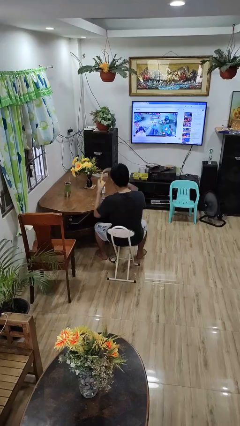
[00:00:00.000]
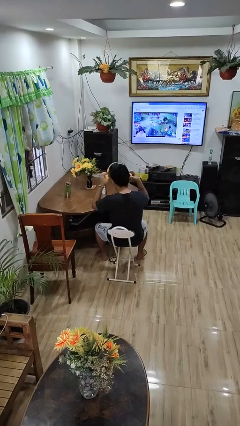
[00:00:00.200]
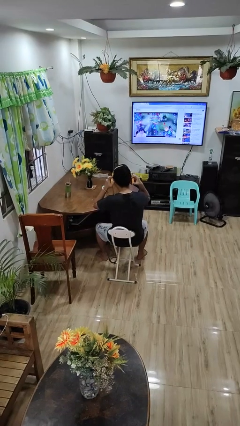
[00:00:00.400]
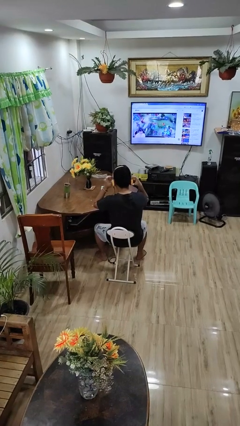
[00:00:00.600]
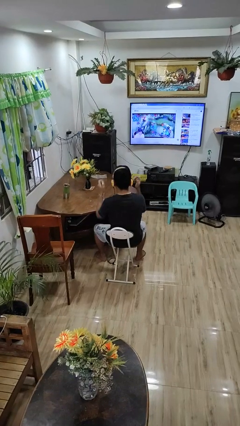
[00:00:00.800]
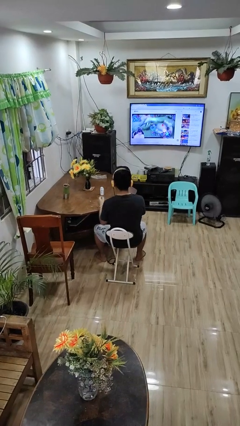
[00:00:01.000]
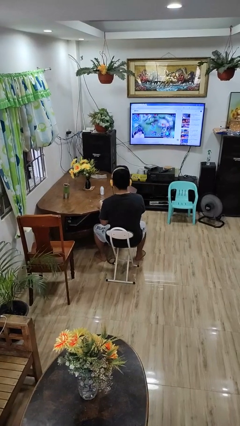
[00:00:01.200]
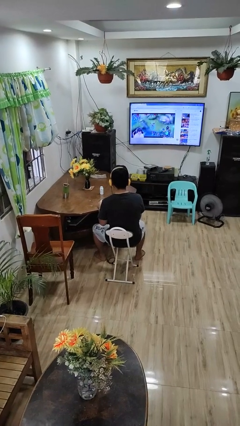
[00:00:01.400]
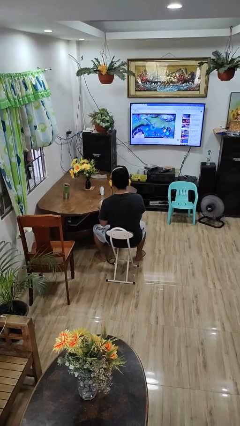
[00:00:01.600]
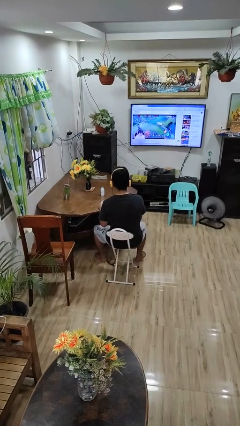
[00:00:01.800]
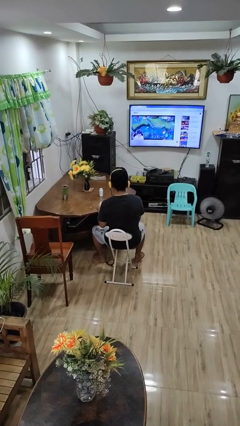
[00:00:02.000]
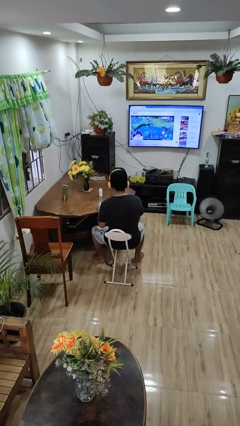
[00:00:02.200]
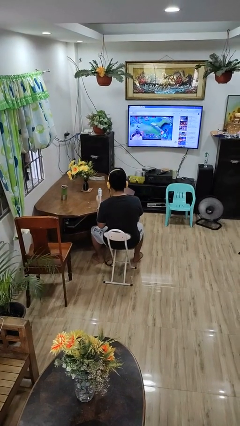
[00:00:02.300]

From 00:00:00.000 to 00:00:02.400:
person puts on headphones

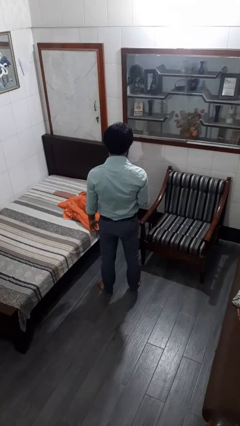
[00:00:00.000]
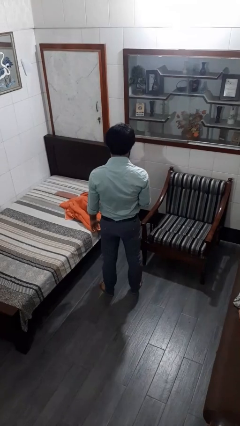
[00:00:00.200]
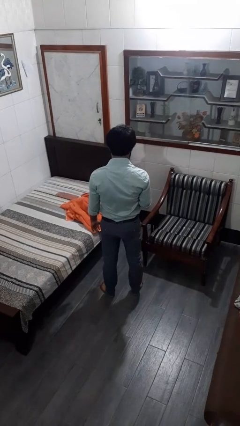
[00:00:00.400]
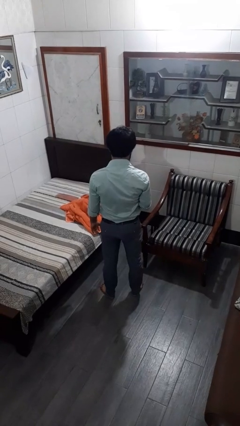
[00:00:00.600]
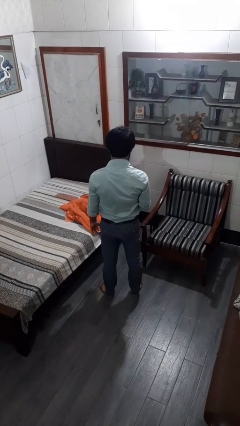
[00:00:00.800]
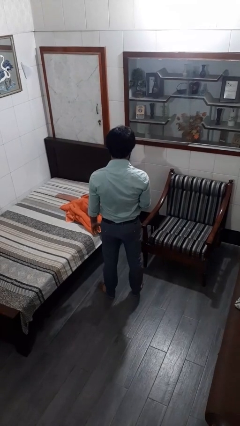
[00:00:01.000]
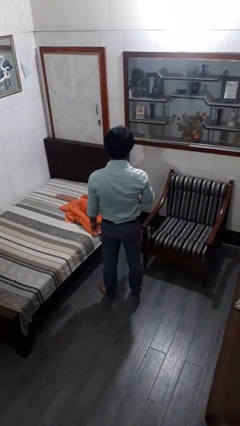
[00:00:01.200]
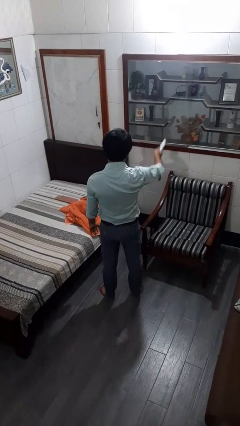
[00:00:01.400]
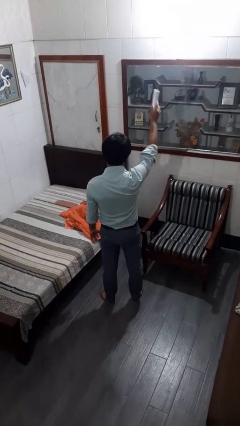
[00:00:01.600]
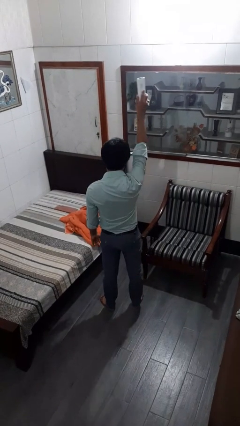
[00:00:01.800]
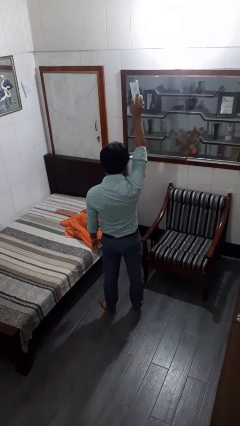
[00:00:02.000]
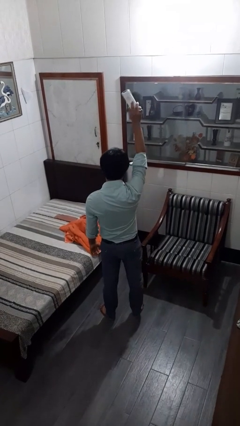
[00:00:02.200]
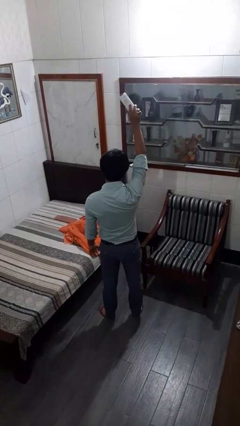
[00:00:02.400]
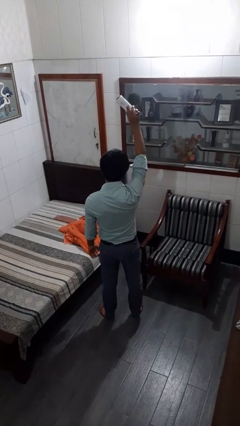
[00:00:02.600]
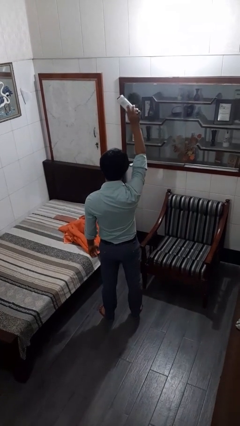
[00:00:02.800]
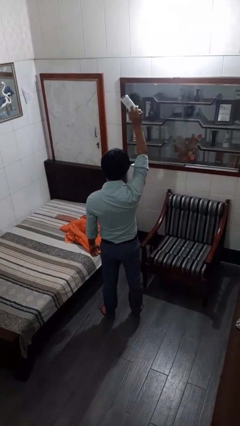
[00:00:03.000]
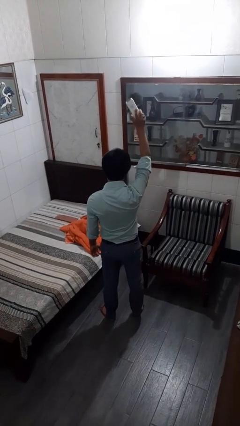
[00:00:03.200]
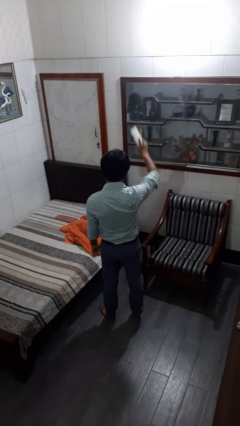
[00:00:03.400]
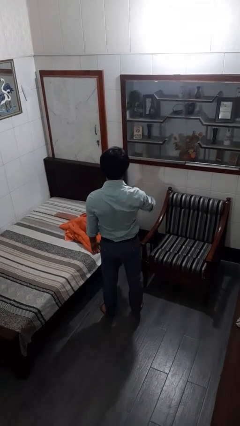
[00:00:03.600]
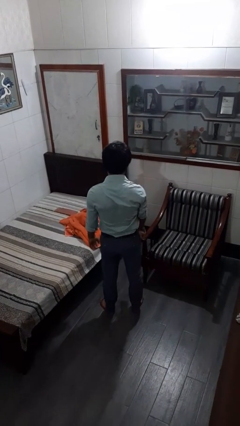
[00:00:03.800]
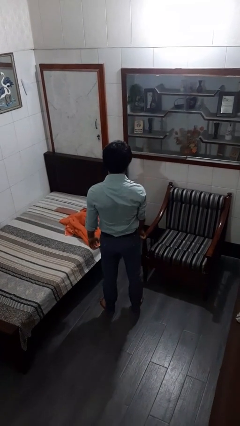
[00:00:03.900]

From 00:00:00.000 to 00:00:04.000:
person holds object above head

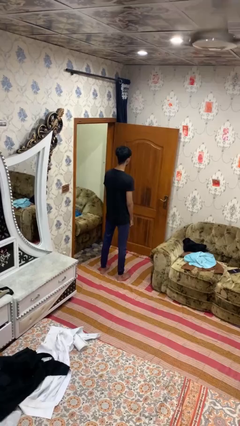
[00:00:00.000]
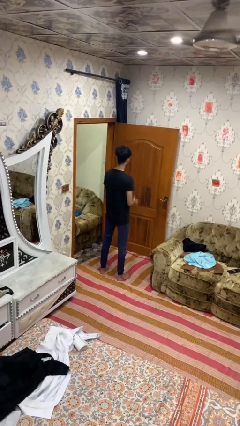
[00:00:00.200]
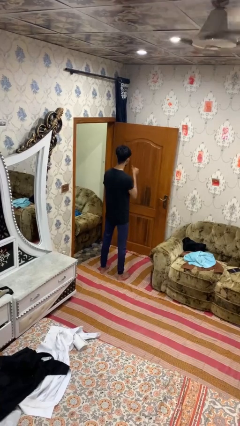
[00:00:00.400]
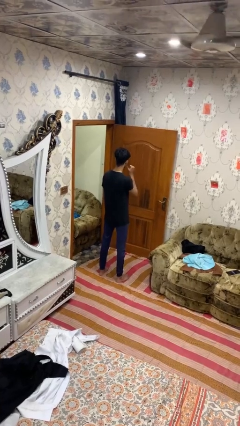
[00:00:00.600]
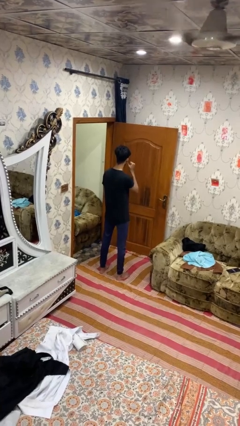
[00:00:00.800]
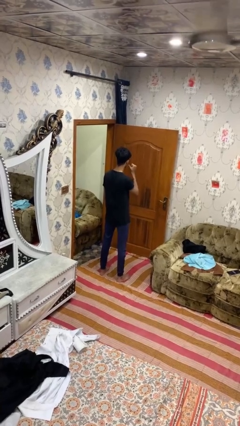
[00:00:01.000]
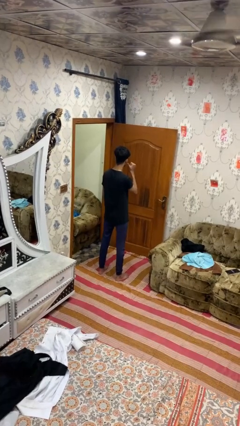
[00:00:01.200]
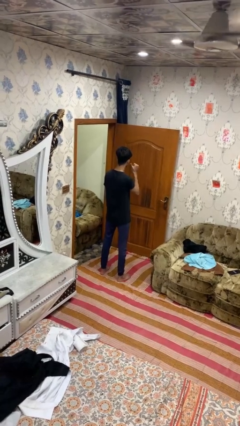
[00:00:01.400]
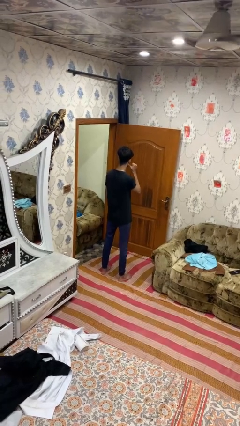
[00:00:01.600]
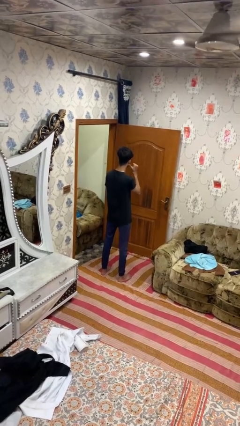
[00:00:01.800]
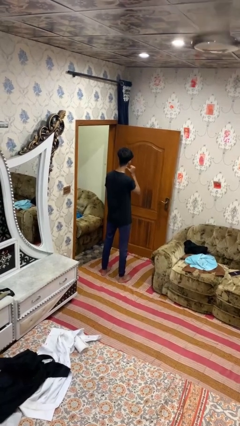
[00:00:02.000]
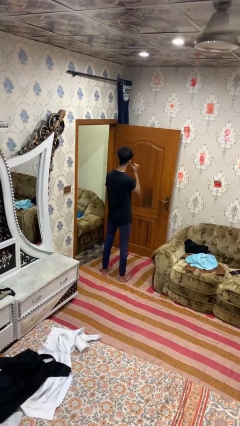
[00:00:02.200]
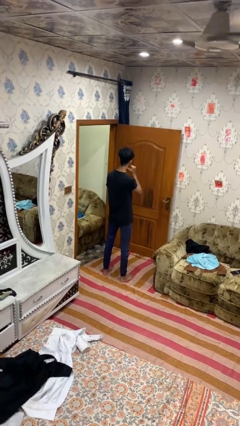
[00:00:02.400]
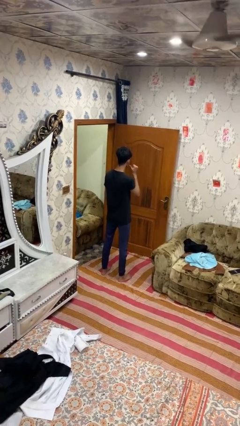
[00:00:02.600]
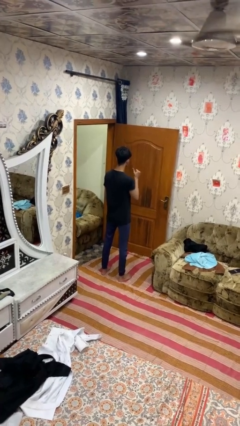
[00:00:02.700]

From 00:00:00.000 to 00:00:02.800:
person gestures behind me

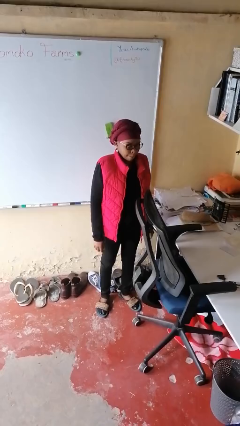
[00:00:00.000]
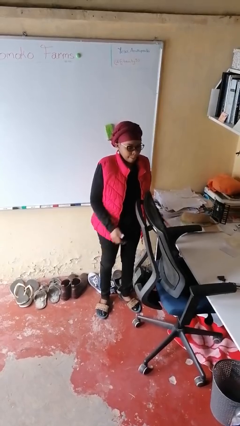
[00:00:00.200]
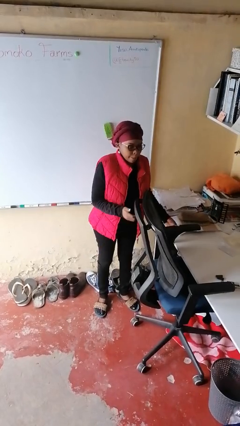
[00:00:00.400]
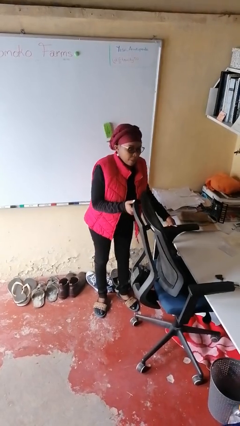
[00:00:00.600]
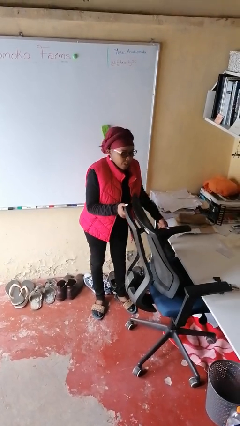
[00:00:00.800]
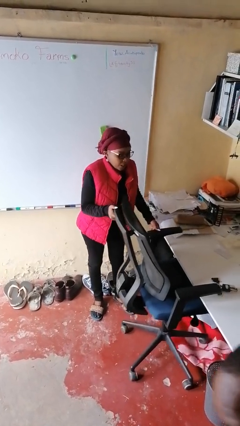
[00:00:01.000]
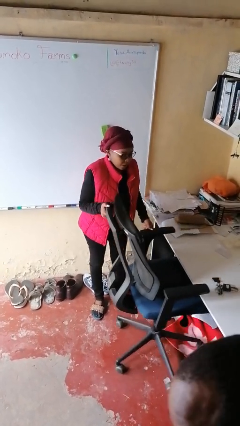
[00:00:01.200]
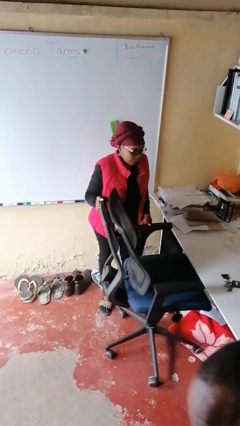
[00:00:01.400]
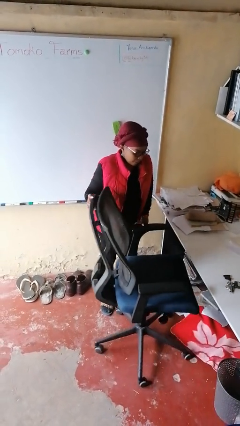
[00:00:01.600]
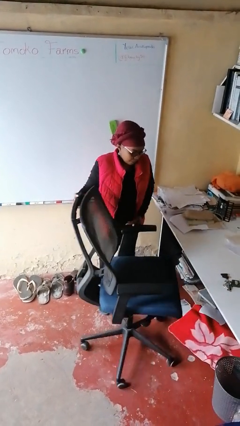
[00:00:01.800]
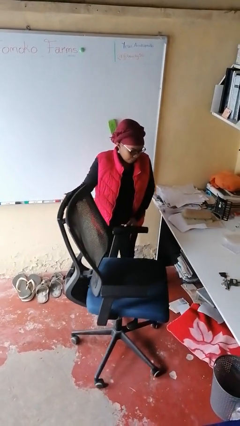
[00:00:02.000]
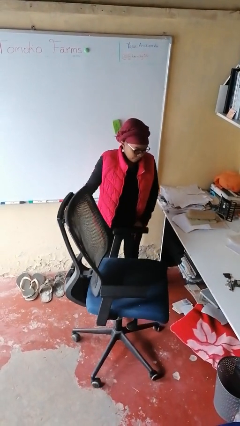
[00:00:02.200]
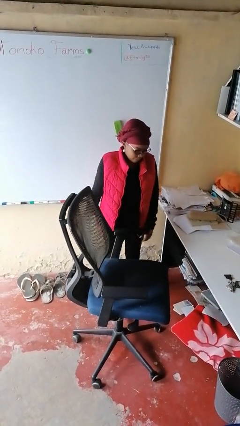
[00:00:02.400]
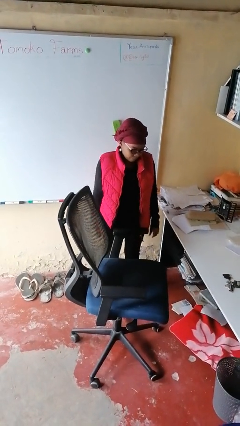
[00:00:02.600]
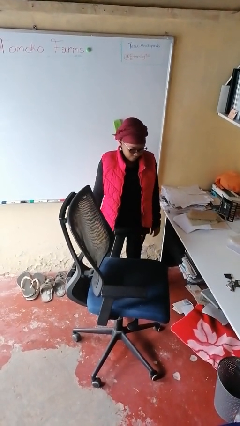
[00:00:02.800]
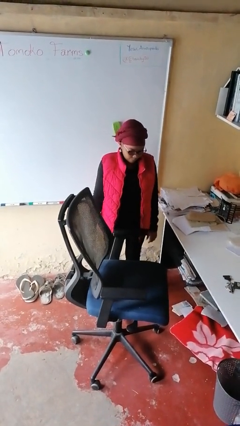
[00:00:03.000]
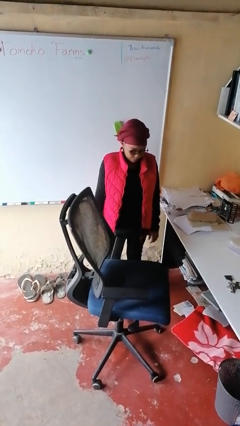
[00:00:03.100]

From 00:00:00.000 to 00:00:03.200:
person pulls out chair

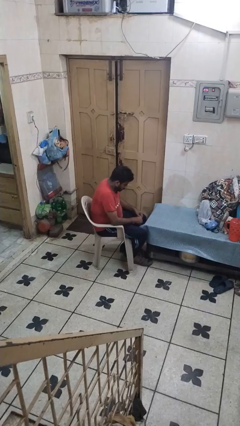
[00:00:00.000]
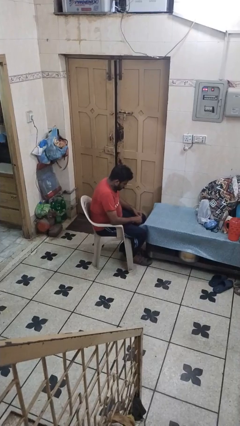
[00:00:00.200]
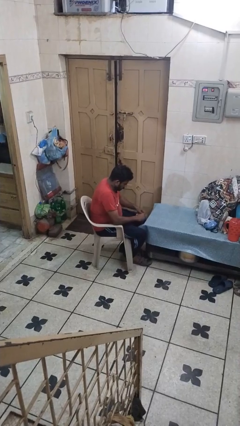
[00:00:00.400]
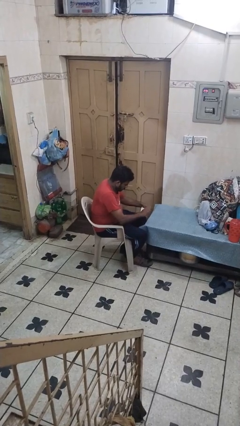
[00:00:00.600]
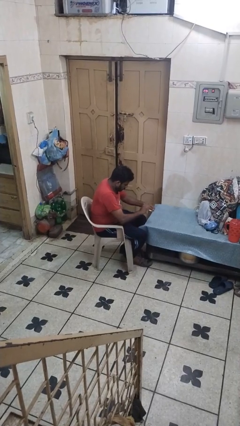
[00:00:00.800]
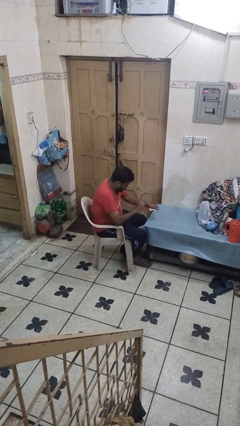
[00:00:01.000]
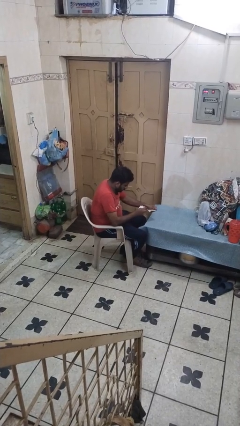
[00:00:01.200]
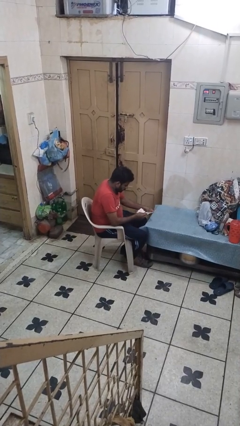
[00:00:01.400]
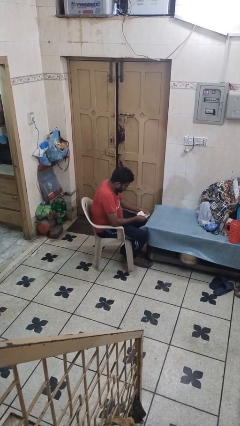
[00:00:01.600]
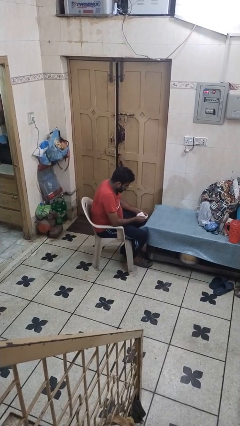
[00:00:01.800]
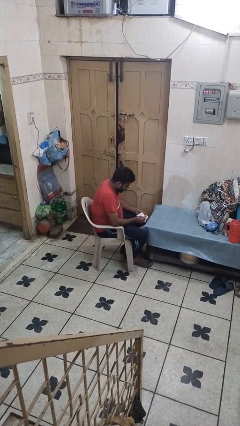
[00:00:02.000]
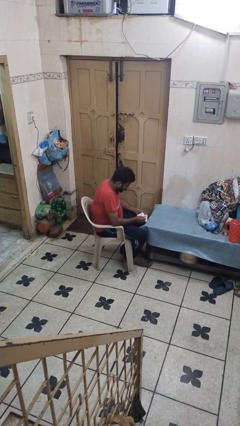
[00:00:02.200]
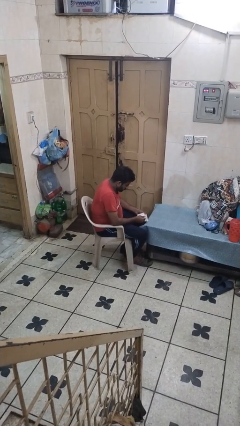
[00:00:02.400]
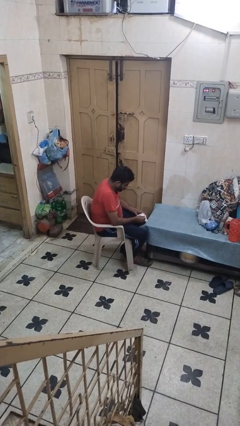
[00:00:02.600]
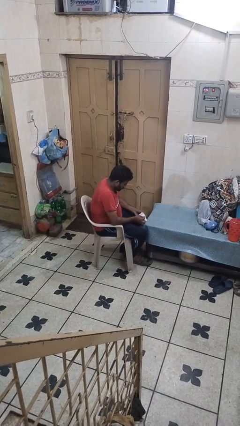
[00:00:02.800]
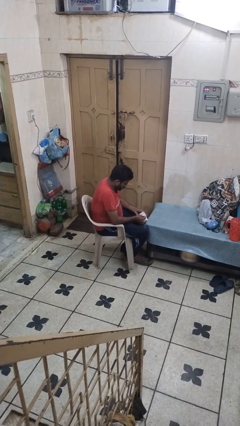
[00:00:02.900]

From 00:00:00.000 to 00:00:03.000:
person tears paper

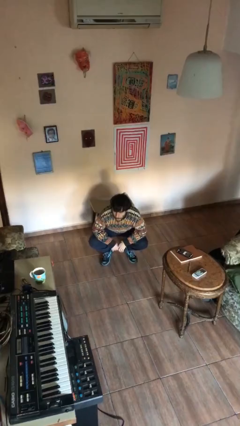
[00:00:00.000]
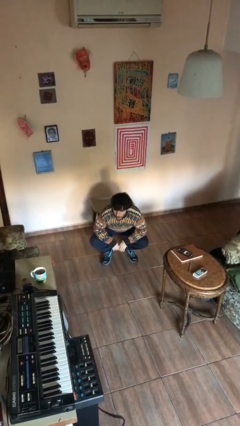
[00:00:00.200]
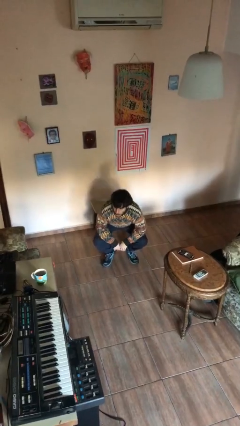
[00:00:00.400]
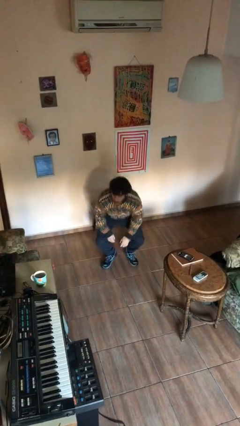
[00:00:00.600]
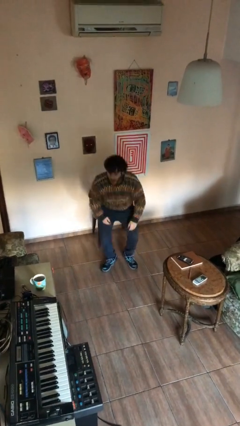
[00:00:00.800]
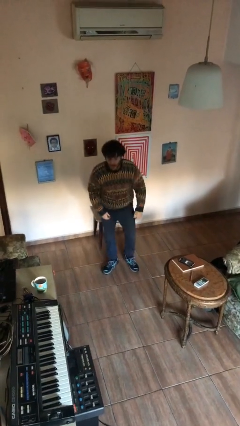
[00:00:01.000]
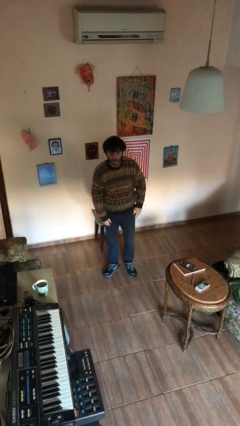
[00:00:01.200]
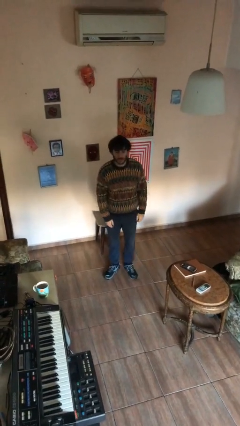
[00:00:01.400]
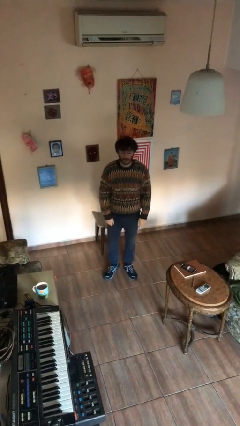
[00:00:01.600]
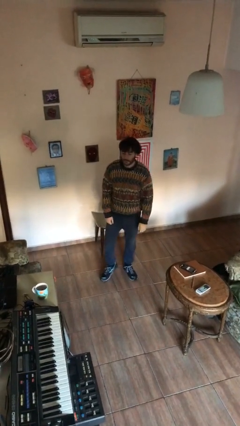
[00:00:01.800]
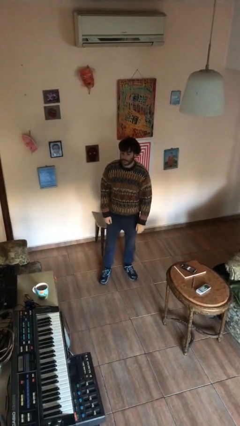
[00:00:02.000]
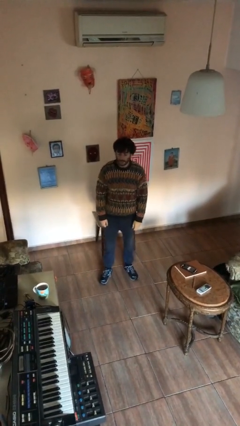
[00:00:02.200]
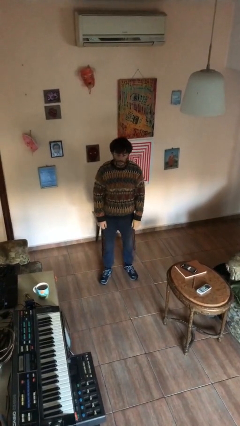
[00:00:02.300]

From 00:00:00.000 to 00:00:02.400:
person stands up
